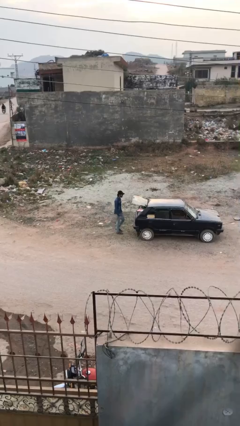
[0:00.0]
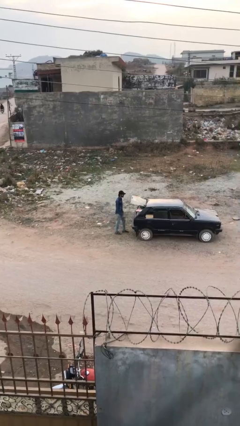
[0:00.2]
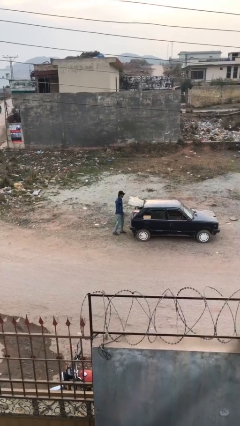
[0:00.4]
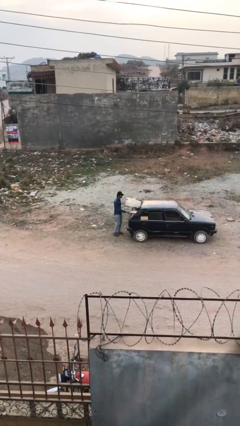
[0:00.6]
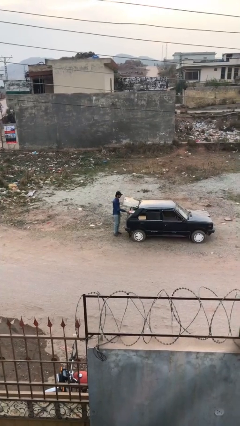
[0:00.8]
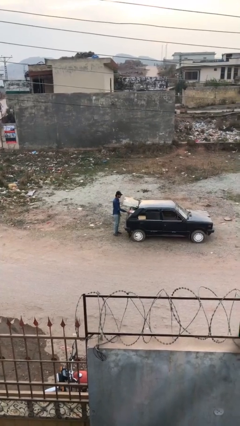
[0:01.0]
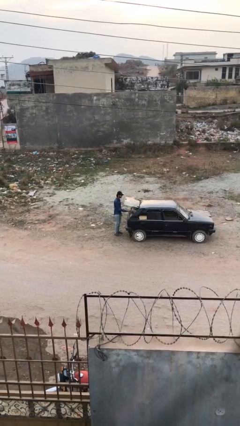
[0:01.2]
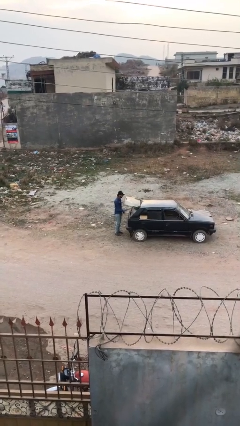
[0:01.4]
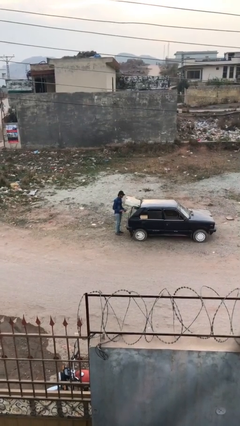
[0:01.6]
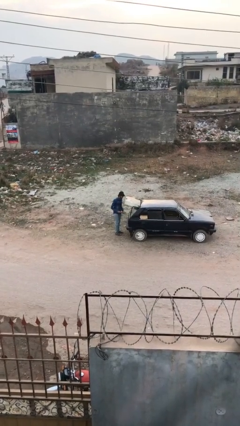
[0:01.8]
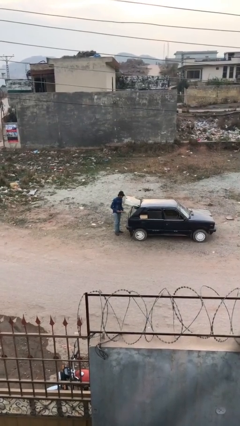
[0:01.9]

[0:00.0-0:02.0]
person unloads car

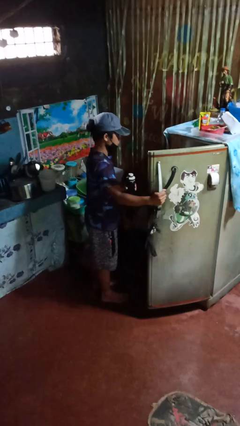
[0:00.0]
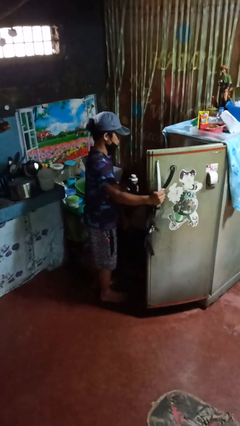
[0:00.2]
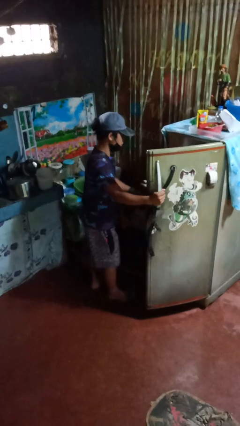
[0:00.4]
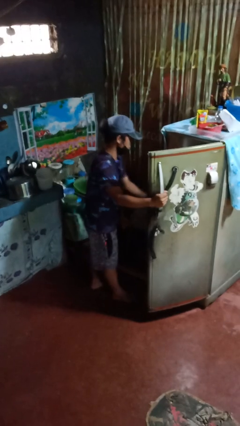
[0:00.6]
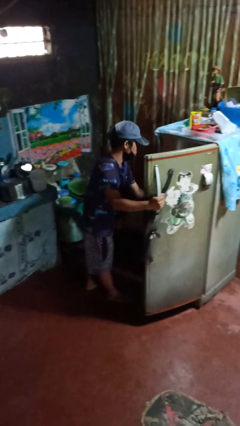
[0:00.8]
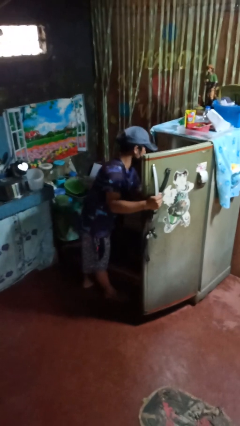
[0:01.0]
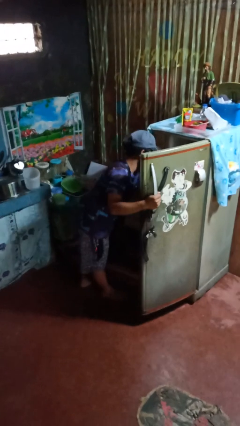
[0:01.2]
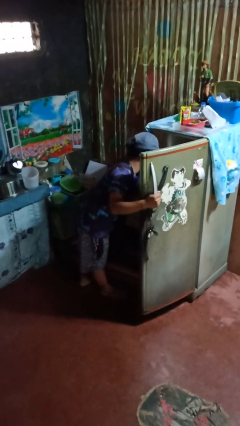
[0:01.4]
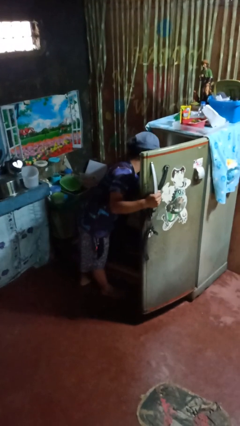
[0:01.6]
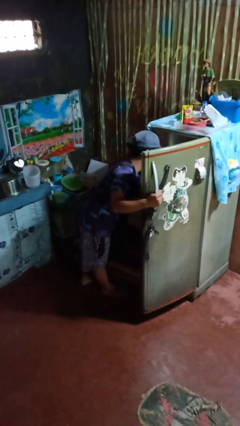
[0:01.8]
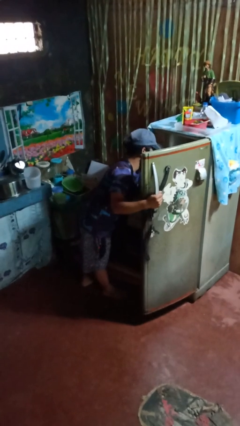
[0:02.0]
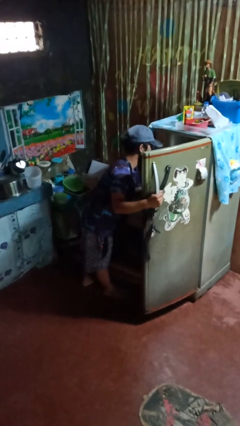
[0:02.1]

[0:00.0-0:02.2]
person puts object into refrigerator

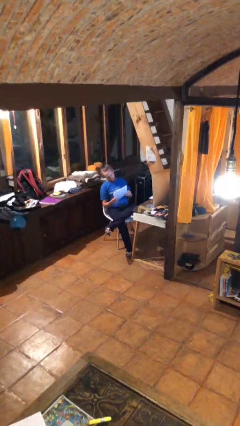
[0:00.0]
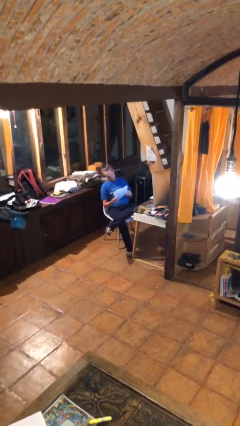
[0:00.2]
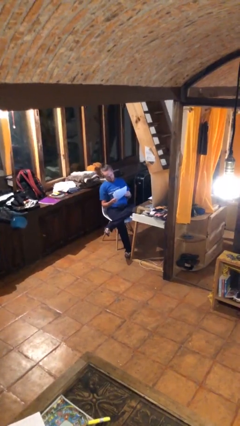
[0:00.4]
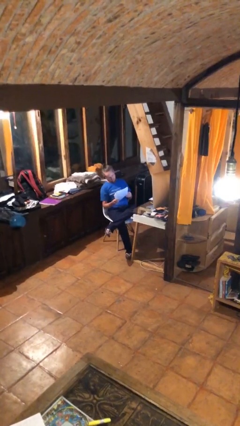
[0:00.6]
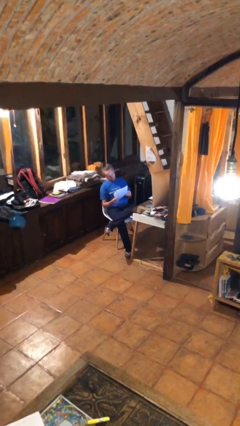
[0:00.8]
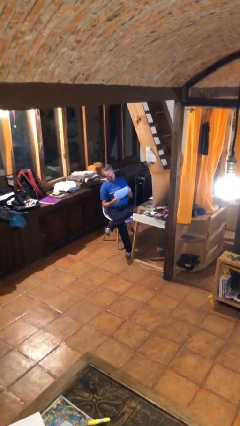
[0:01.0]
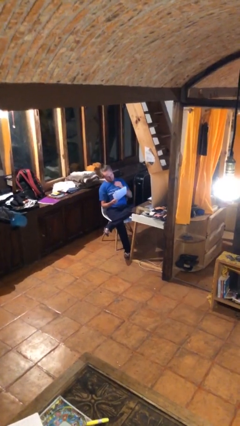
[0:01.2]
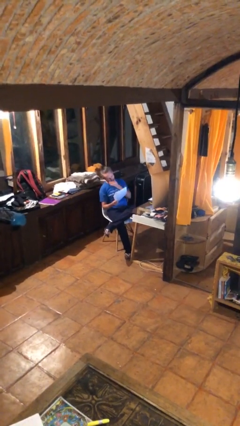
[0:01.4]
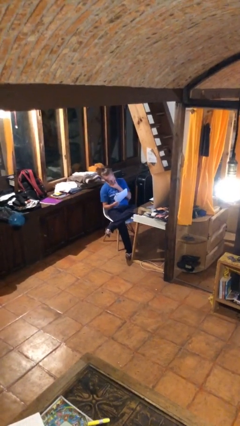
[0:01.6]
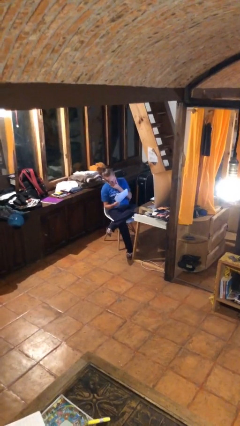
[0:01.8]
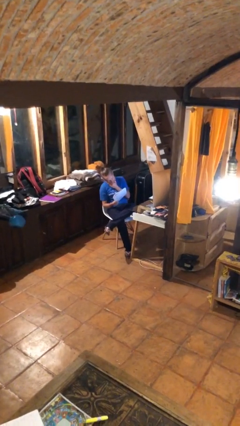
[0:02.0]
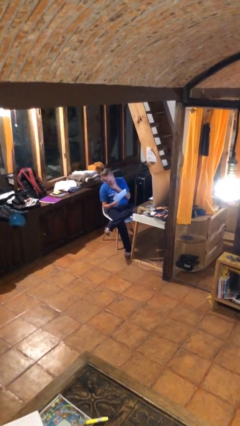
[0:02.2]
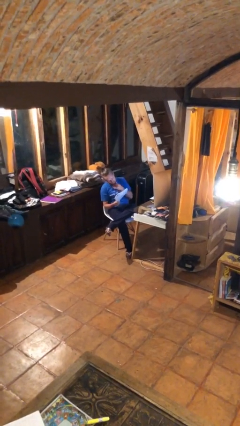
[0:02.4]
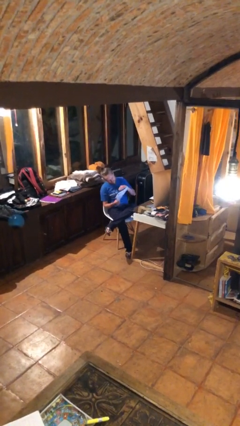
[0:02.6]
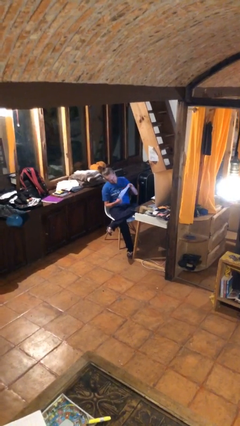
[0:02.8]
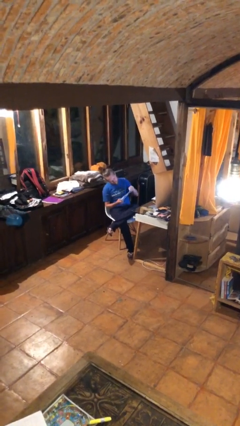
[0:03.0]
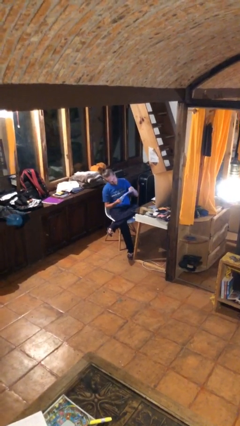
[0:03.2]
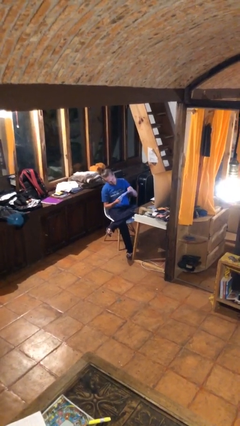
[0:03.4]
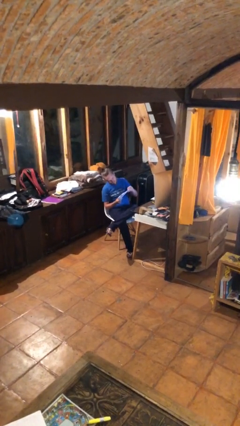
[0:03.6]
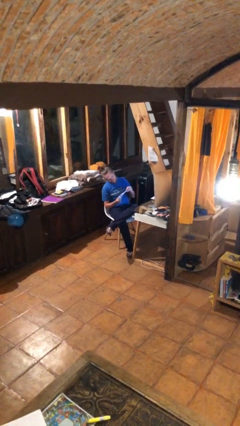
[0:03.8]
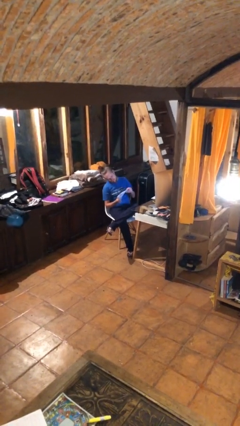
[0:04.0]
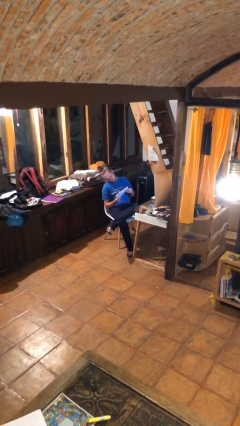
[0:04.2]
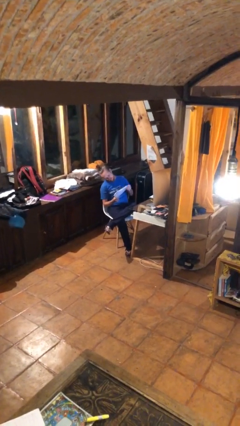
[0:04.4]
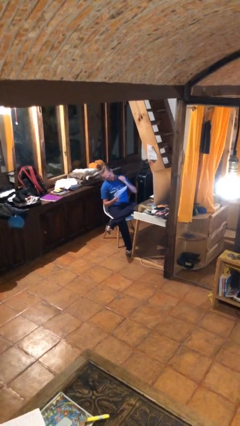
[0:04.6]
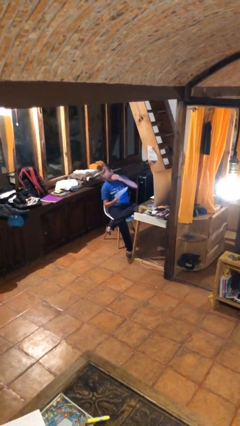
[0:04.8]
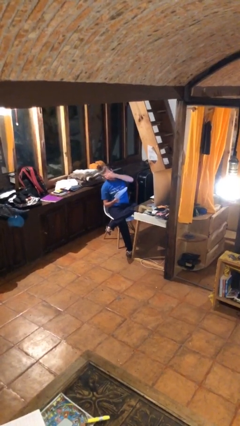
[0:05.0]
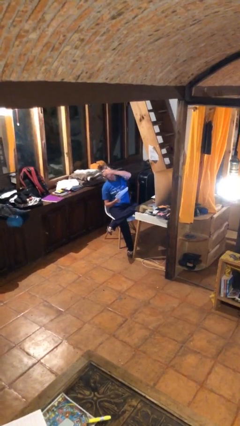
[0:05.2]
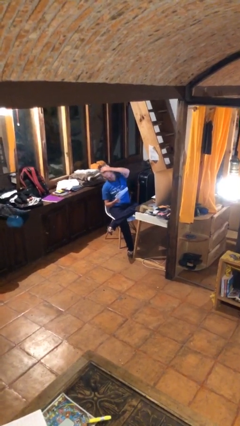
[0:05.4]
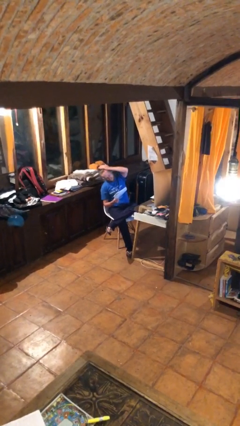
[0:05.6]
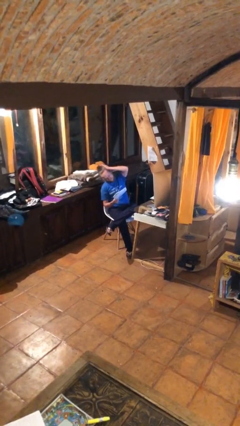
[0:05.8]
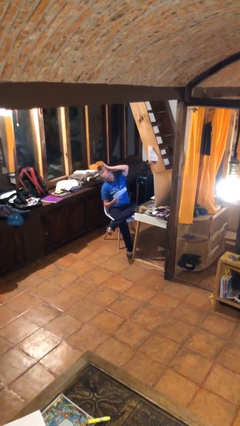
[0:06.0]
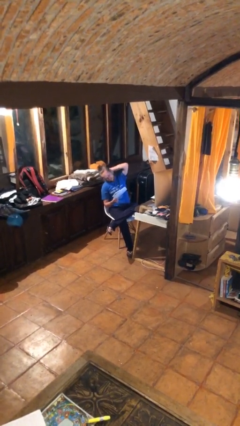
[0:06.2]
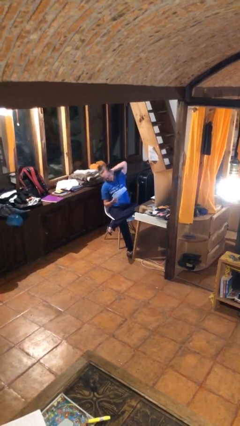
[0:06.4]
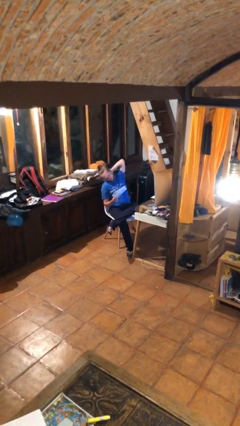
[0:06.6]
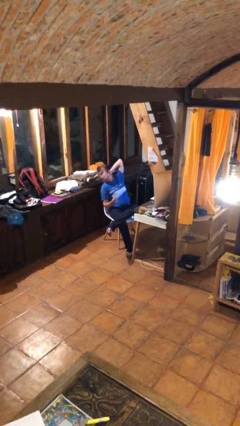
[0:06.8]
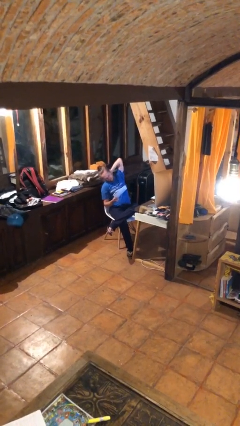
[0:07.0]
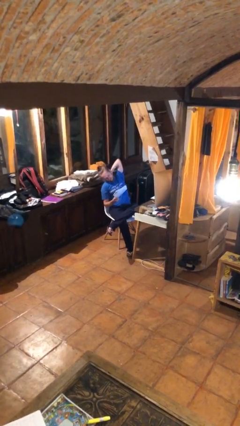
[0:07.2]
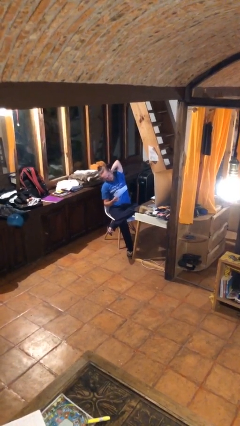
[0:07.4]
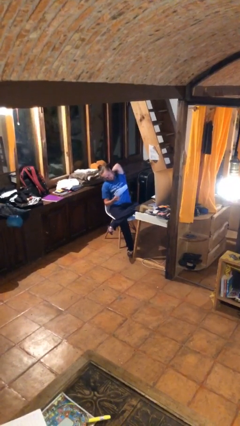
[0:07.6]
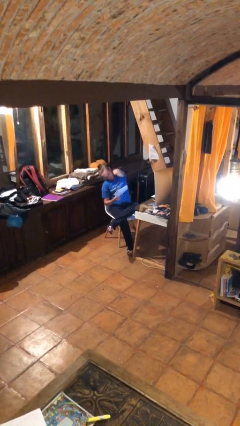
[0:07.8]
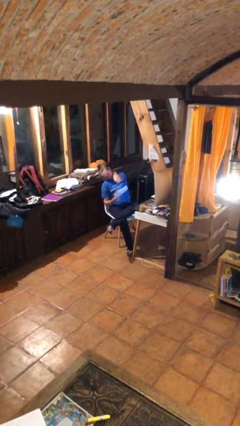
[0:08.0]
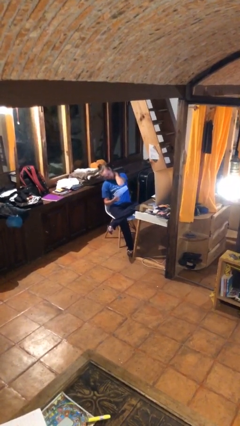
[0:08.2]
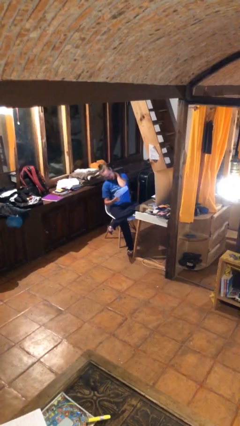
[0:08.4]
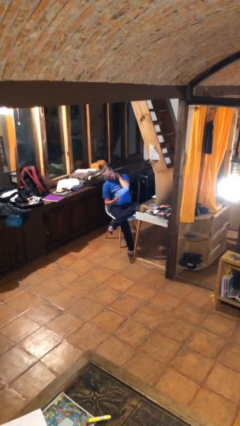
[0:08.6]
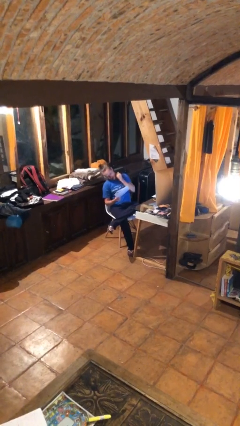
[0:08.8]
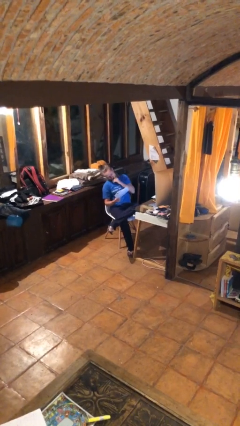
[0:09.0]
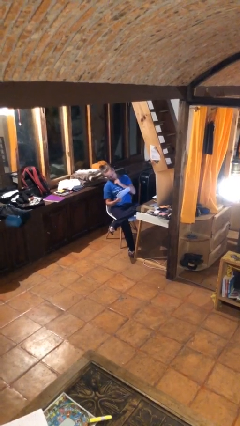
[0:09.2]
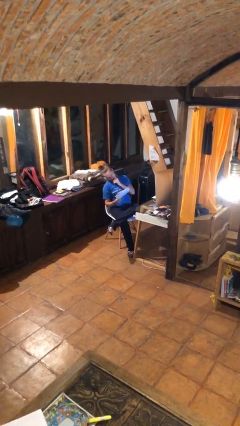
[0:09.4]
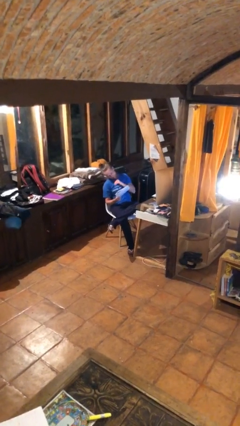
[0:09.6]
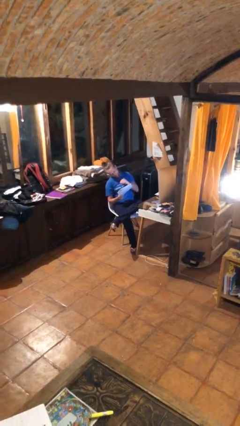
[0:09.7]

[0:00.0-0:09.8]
person reads document

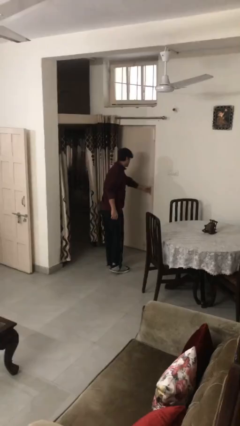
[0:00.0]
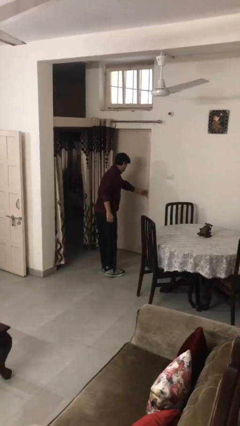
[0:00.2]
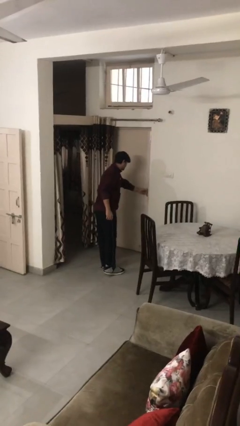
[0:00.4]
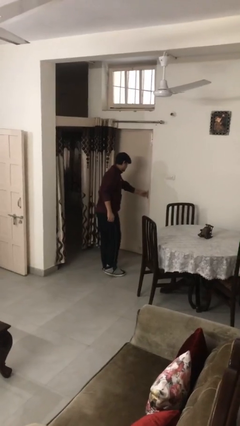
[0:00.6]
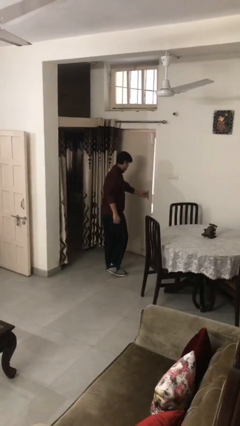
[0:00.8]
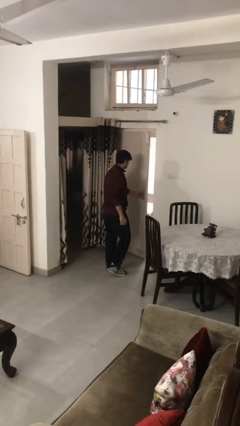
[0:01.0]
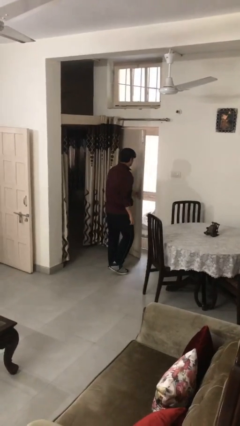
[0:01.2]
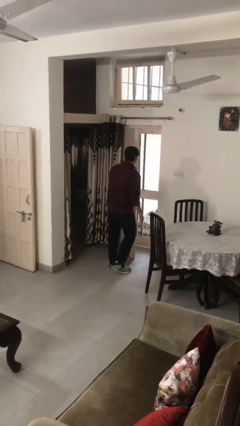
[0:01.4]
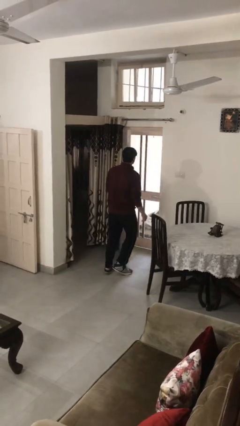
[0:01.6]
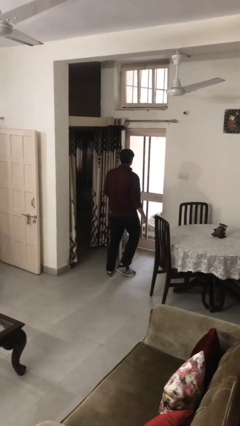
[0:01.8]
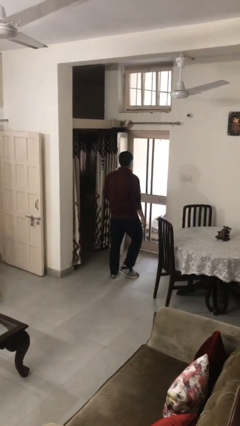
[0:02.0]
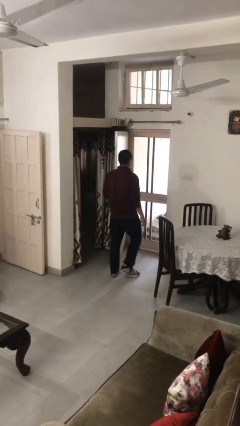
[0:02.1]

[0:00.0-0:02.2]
person opens facility door

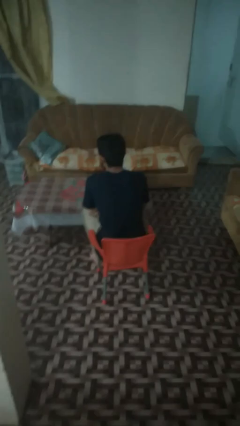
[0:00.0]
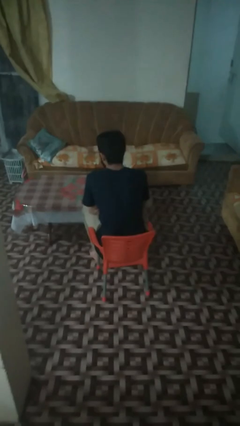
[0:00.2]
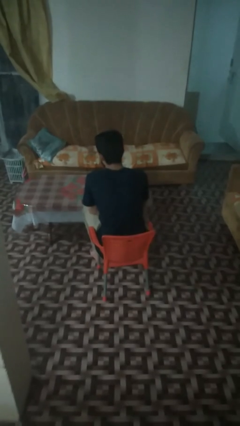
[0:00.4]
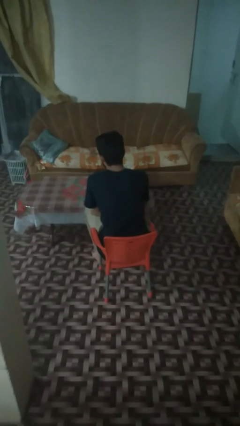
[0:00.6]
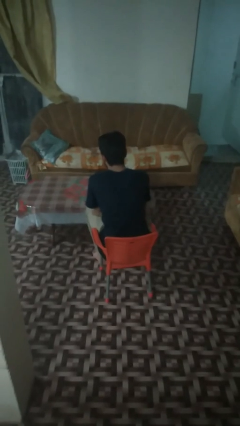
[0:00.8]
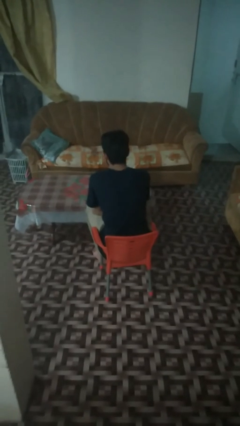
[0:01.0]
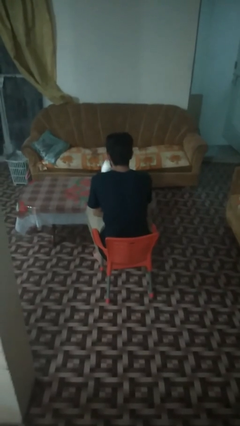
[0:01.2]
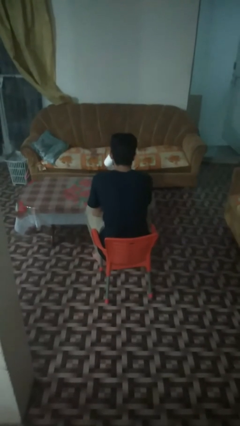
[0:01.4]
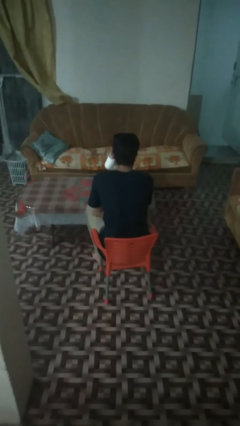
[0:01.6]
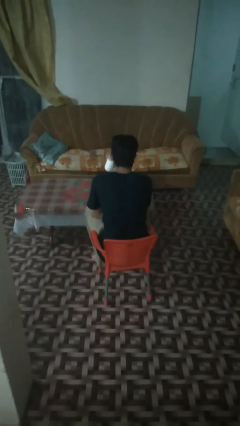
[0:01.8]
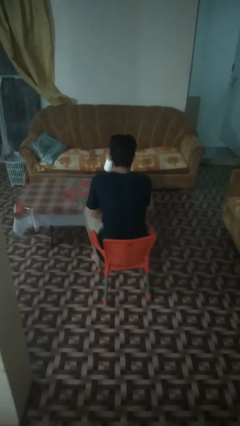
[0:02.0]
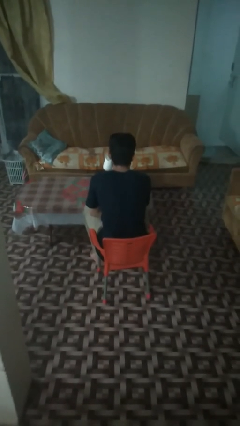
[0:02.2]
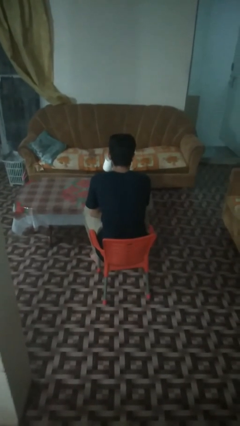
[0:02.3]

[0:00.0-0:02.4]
person picks up object from table
